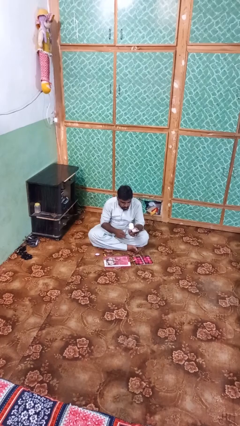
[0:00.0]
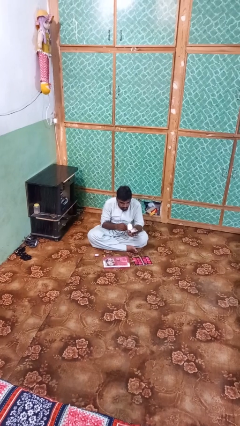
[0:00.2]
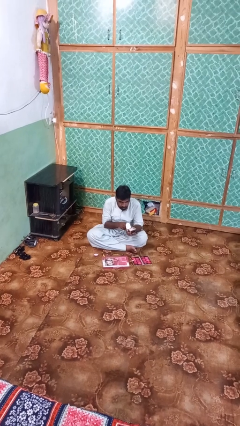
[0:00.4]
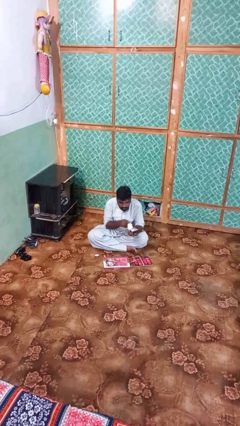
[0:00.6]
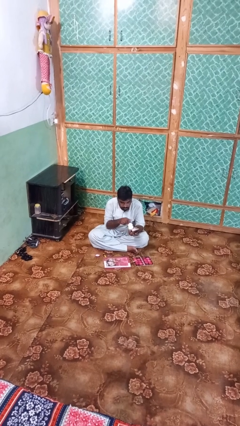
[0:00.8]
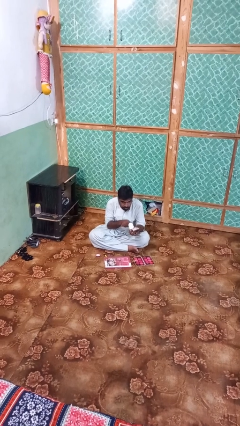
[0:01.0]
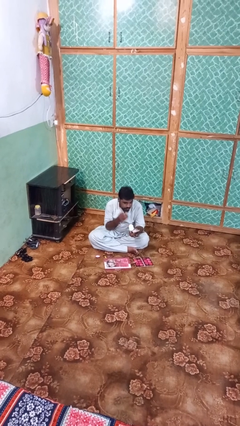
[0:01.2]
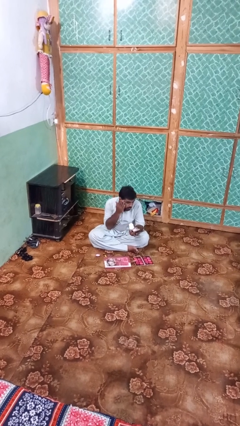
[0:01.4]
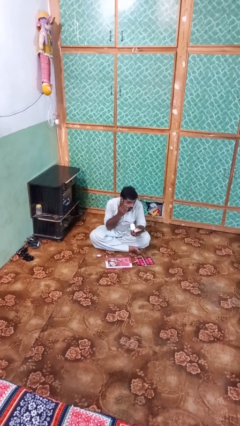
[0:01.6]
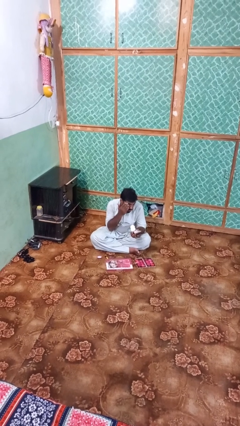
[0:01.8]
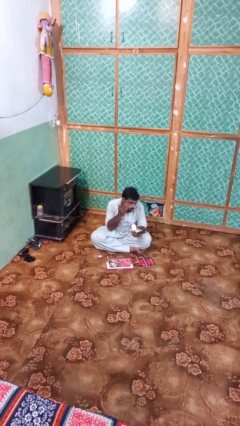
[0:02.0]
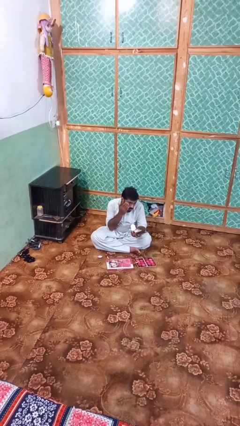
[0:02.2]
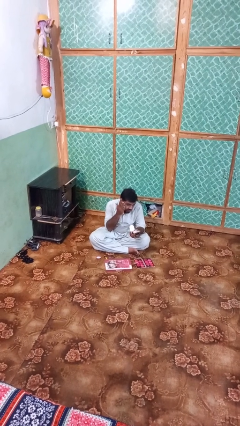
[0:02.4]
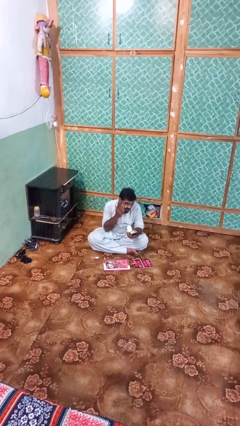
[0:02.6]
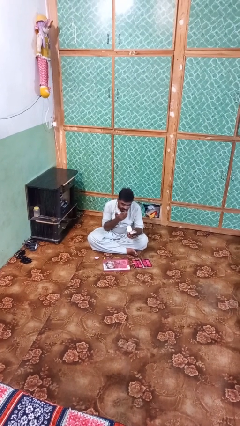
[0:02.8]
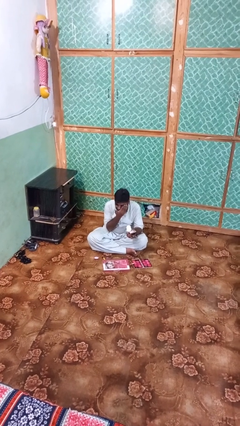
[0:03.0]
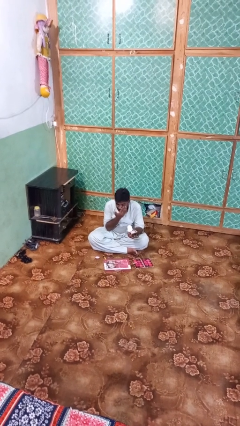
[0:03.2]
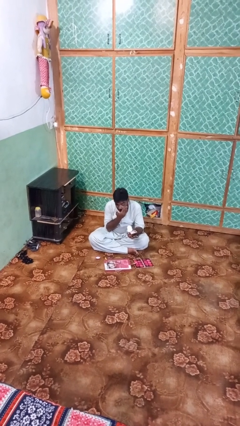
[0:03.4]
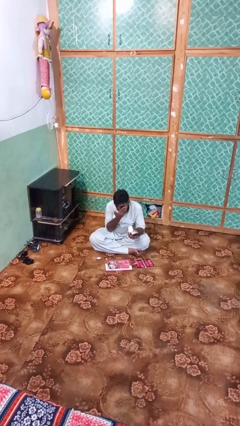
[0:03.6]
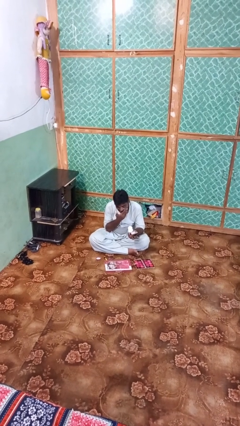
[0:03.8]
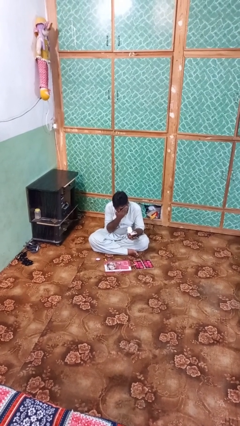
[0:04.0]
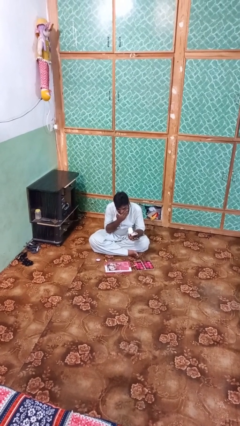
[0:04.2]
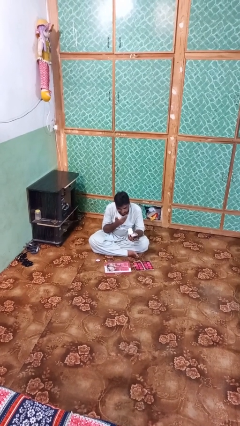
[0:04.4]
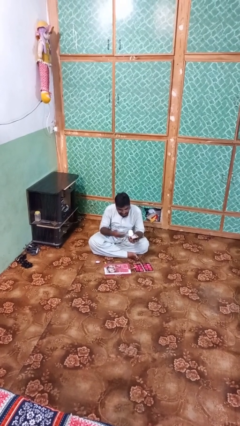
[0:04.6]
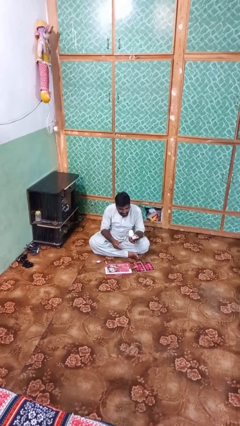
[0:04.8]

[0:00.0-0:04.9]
person applies foundation makeup

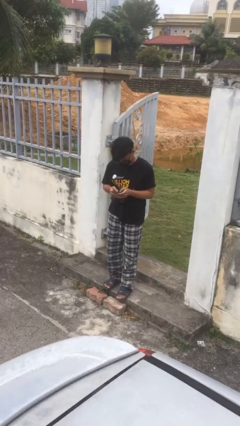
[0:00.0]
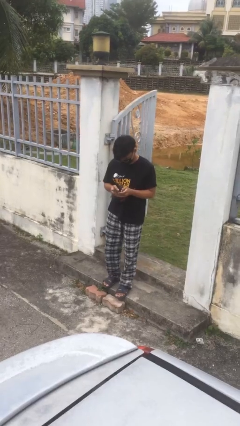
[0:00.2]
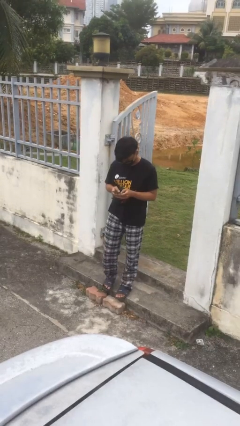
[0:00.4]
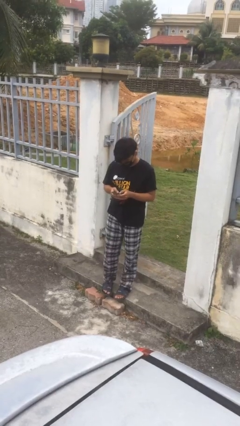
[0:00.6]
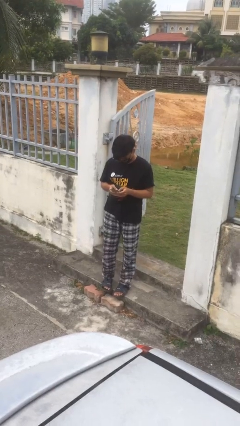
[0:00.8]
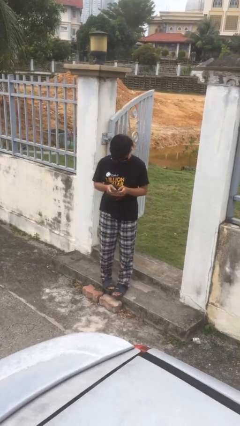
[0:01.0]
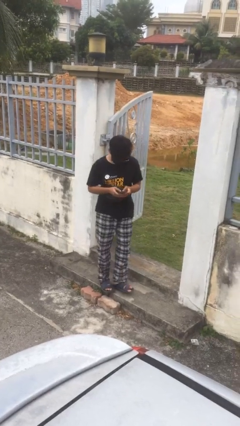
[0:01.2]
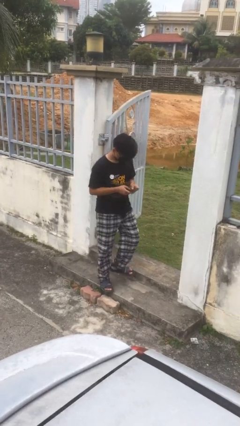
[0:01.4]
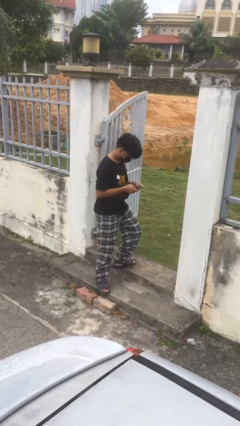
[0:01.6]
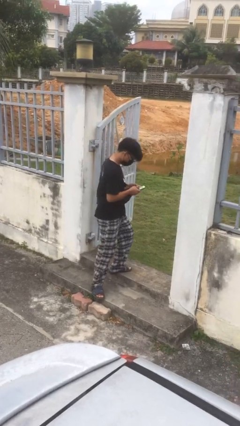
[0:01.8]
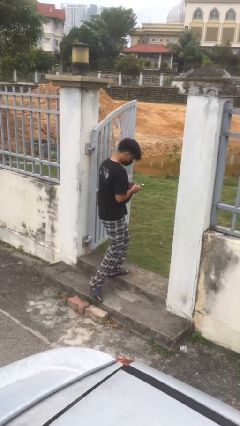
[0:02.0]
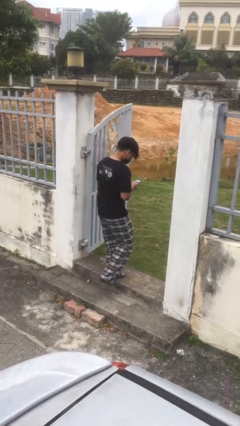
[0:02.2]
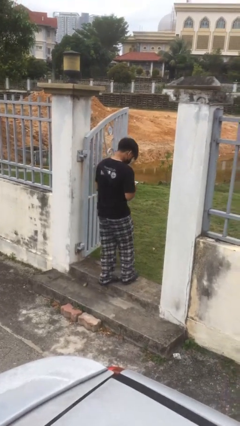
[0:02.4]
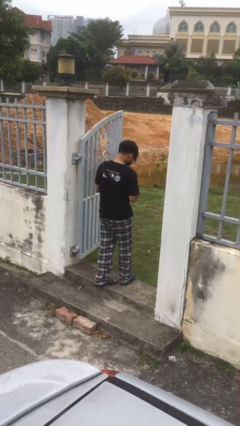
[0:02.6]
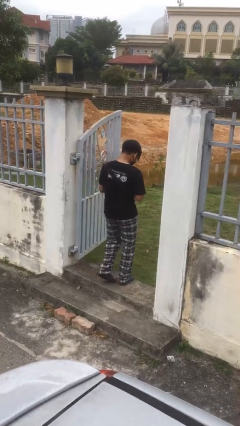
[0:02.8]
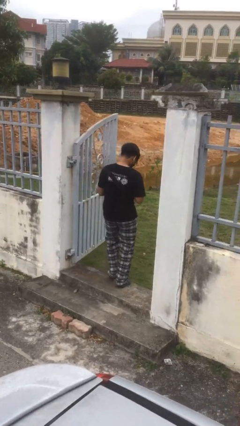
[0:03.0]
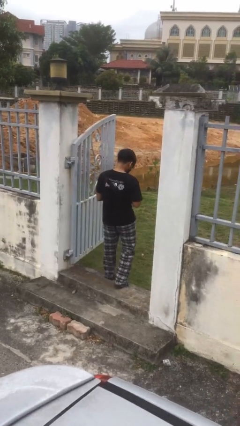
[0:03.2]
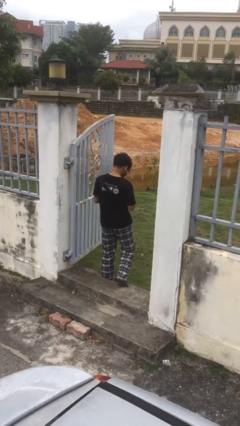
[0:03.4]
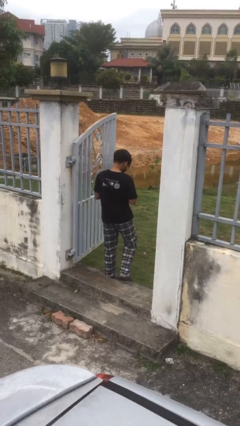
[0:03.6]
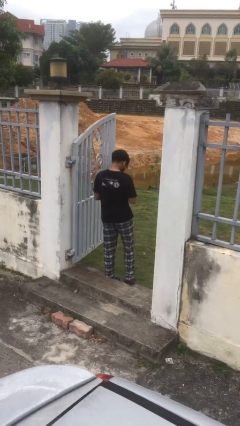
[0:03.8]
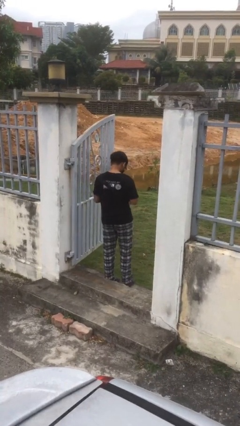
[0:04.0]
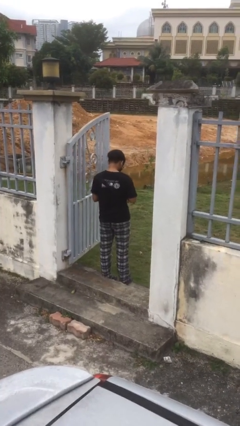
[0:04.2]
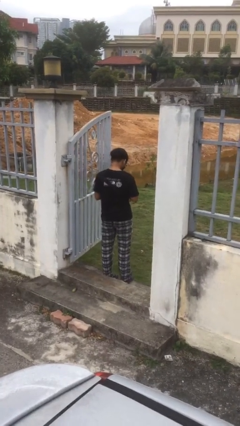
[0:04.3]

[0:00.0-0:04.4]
person exits scene through structure

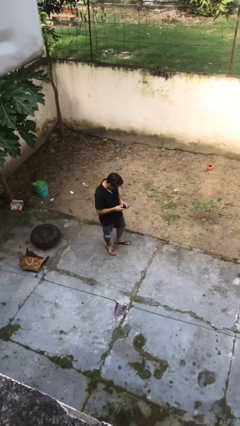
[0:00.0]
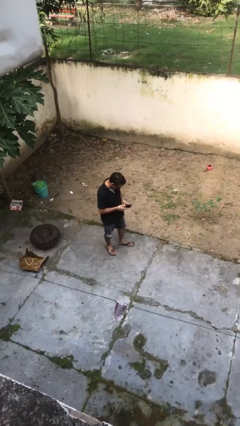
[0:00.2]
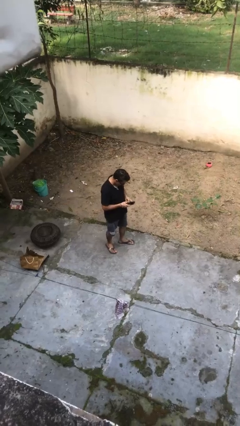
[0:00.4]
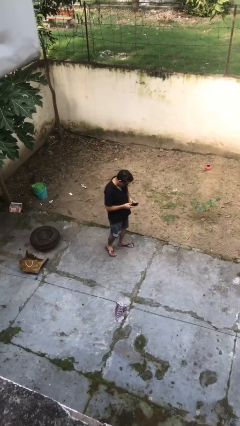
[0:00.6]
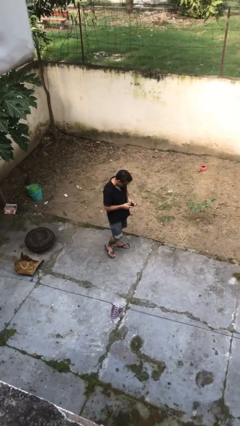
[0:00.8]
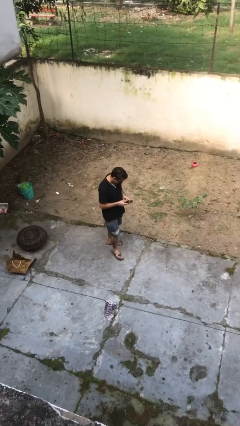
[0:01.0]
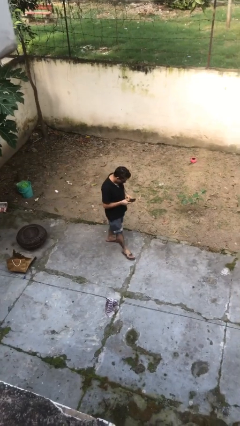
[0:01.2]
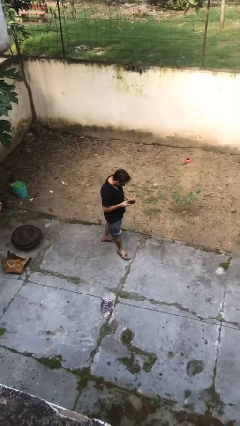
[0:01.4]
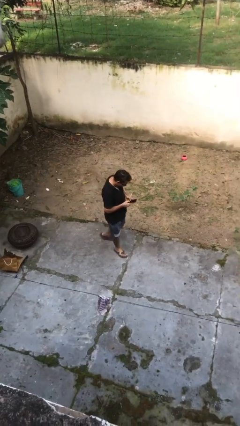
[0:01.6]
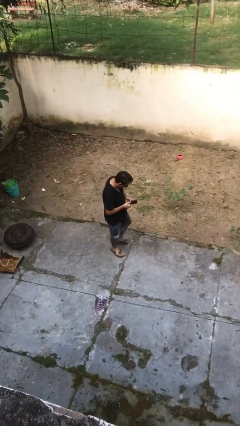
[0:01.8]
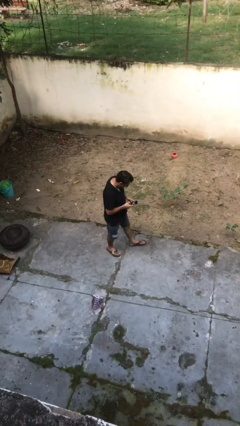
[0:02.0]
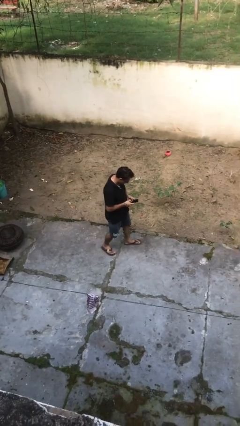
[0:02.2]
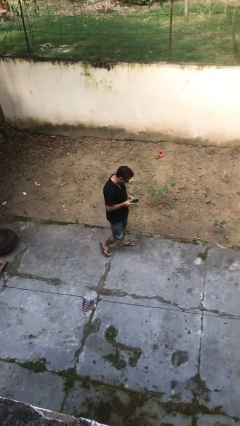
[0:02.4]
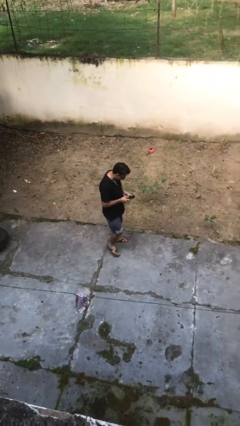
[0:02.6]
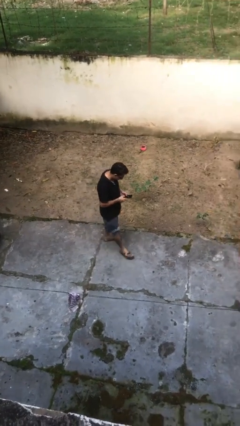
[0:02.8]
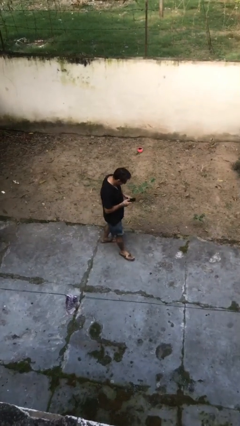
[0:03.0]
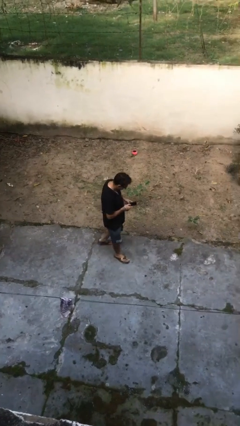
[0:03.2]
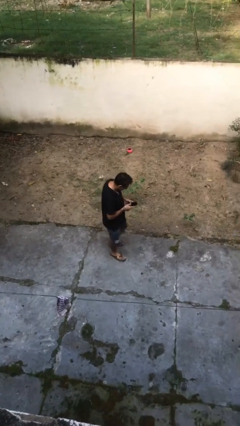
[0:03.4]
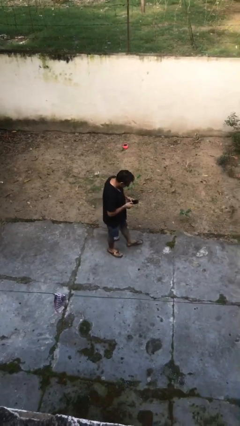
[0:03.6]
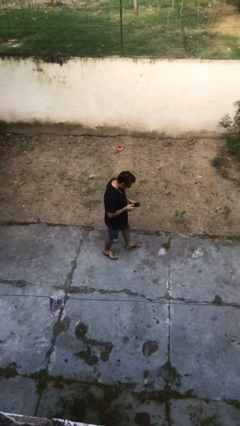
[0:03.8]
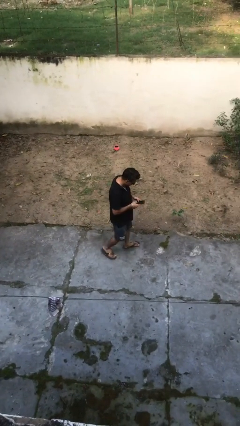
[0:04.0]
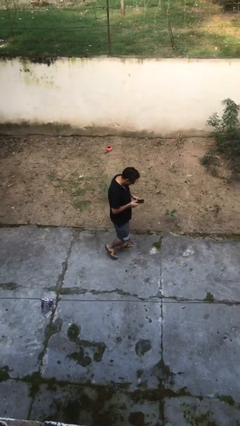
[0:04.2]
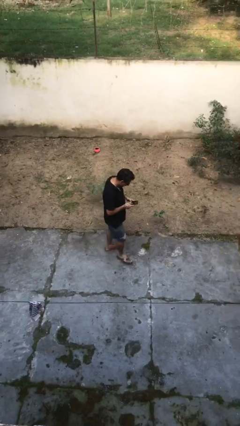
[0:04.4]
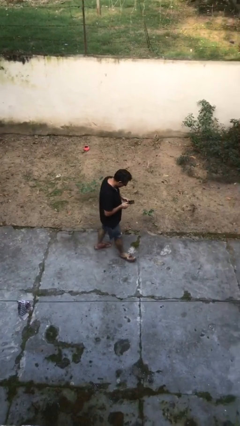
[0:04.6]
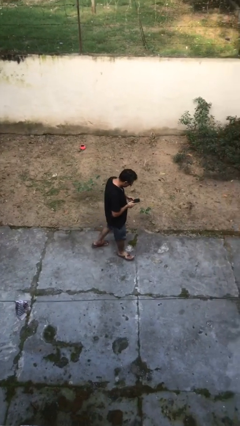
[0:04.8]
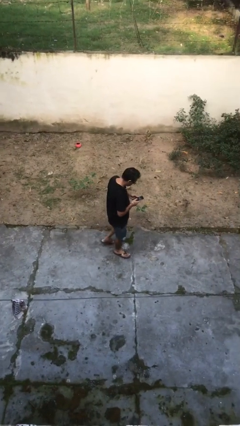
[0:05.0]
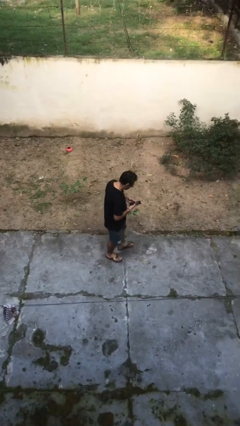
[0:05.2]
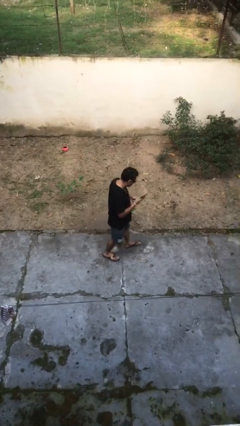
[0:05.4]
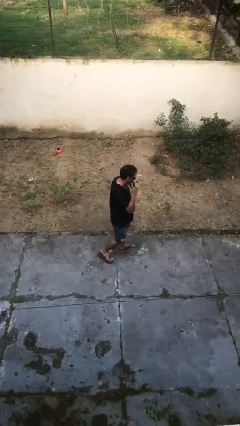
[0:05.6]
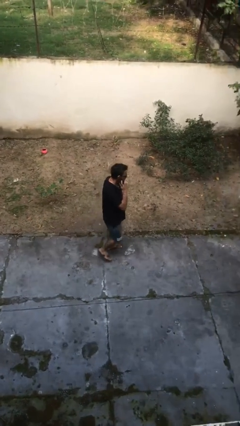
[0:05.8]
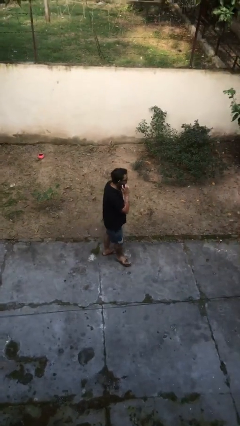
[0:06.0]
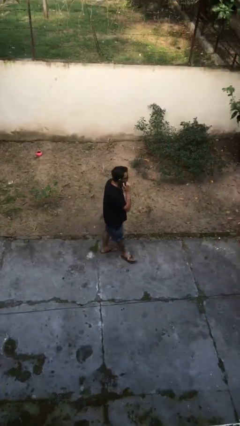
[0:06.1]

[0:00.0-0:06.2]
person texts on phone

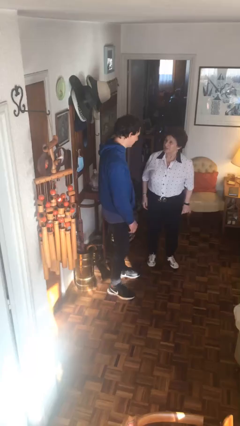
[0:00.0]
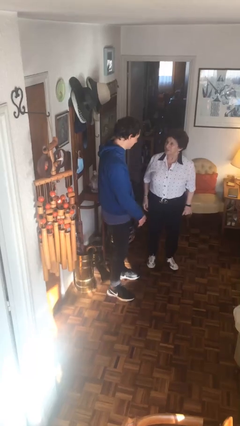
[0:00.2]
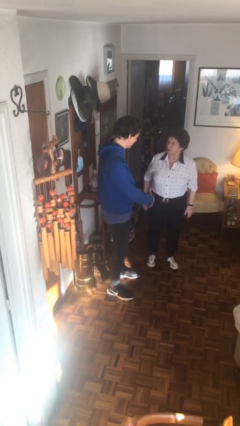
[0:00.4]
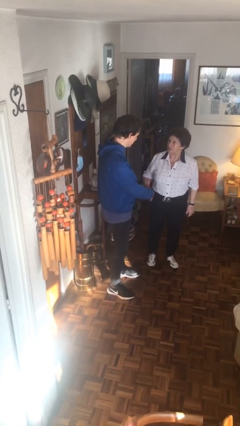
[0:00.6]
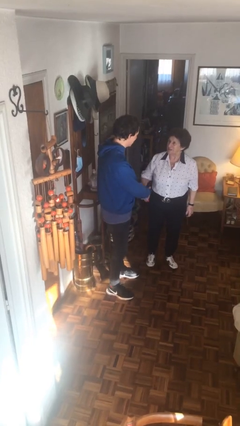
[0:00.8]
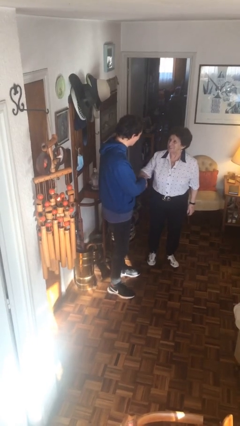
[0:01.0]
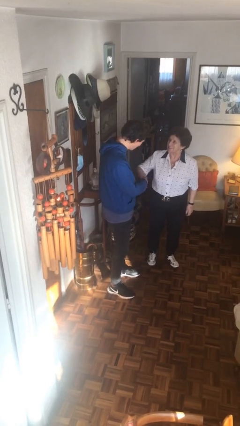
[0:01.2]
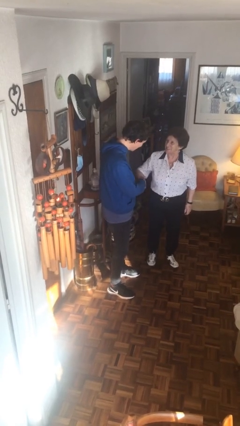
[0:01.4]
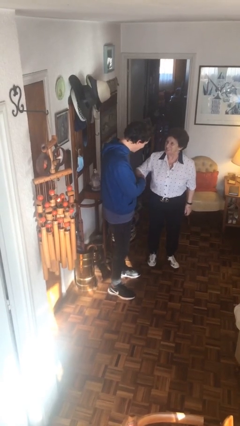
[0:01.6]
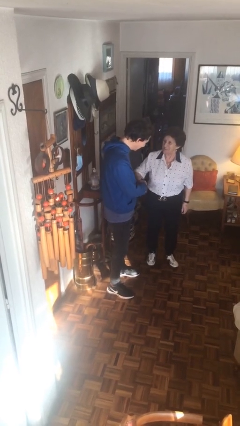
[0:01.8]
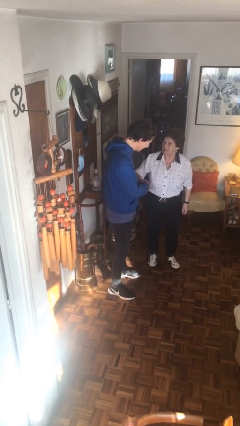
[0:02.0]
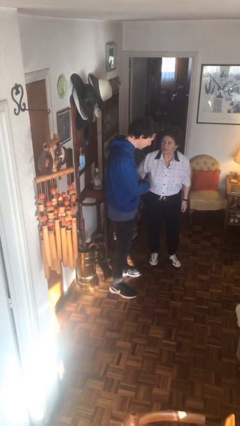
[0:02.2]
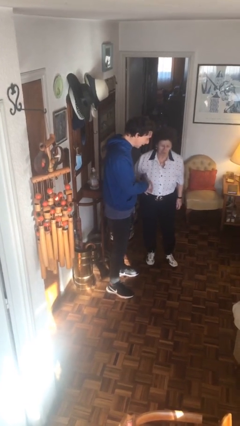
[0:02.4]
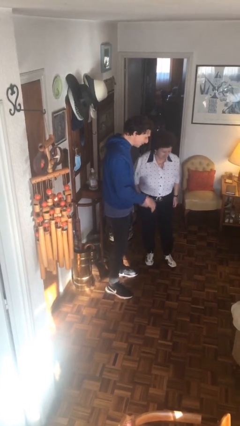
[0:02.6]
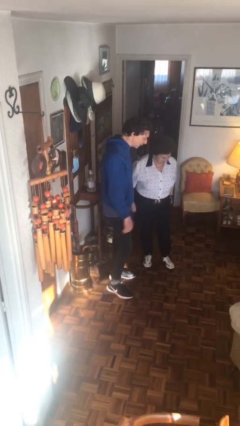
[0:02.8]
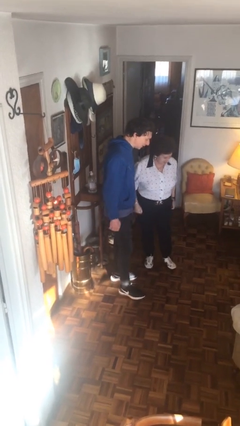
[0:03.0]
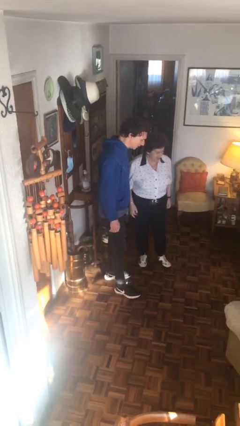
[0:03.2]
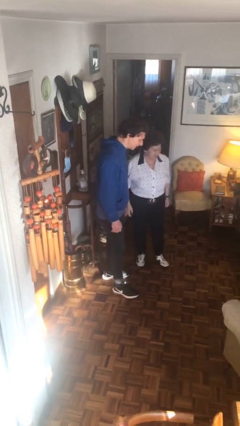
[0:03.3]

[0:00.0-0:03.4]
person shakes hand
